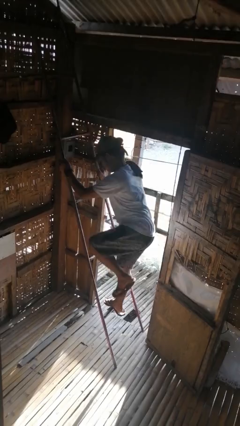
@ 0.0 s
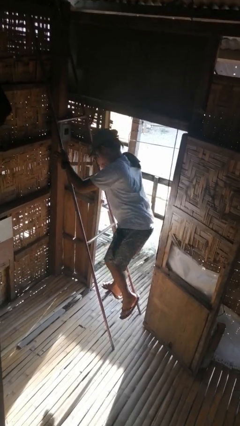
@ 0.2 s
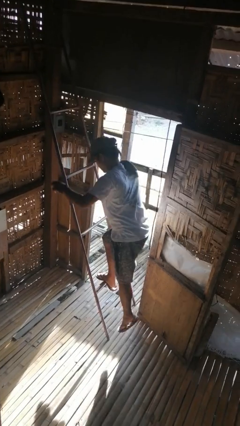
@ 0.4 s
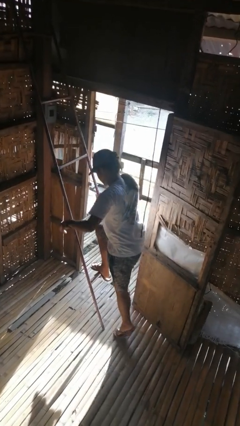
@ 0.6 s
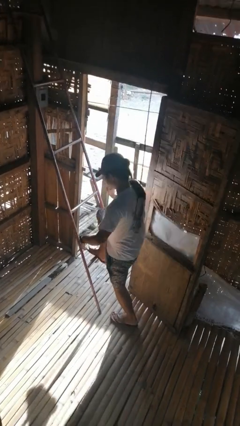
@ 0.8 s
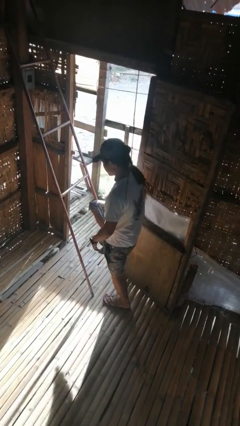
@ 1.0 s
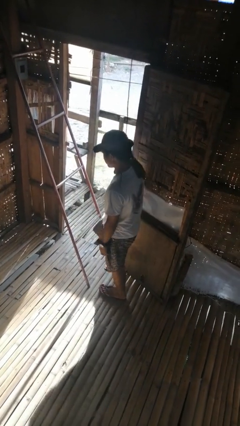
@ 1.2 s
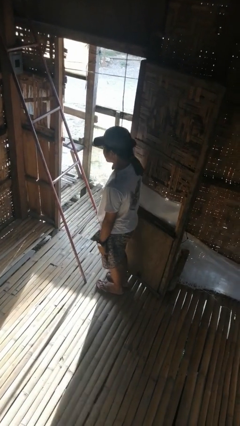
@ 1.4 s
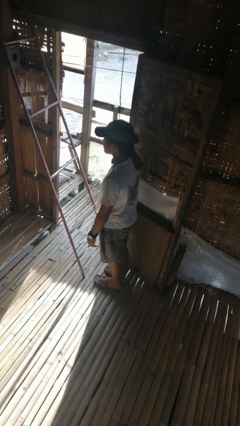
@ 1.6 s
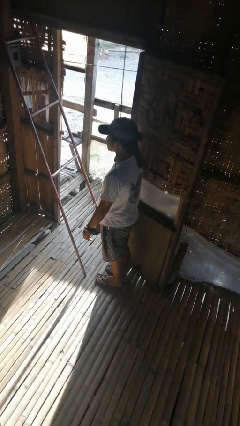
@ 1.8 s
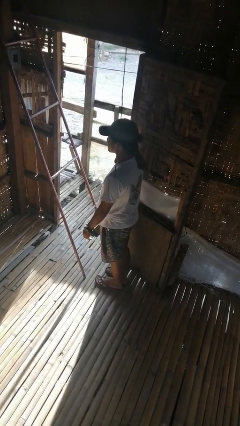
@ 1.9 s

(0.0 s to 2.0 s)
person climbs down ladder

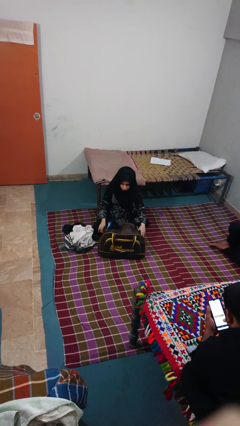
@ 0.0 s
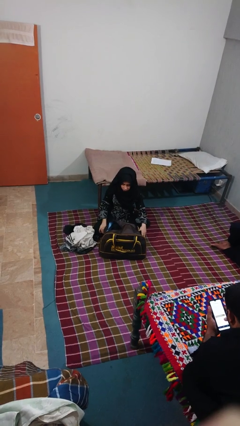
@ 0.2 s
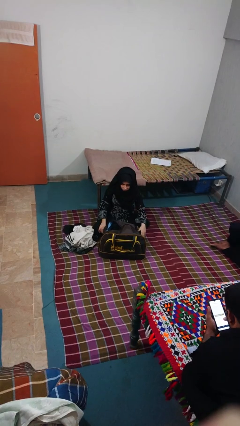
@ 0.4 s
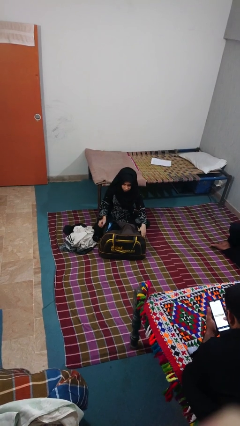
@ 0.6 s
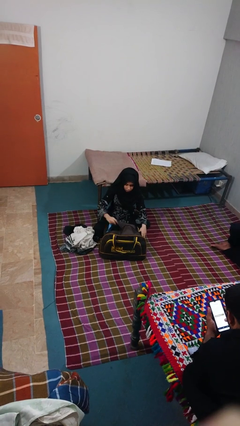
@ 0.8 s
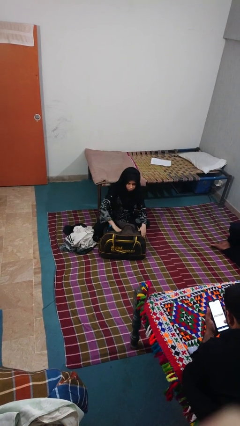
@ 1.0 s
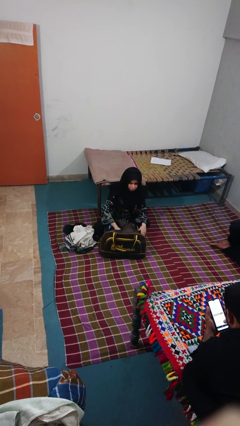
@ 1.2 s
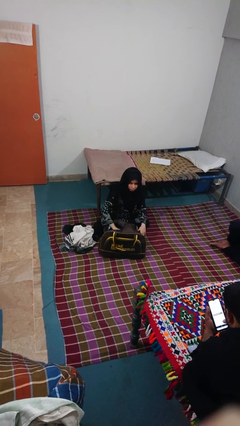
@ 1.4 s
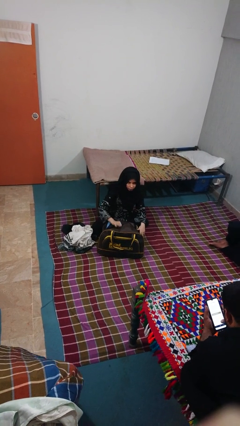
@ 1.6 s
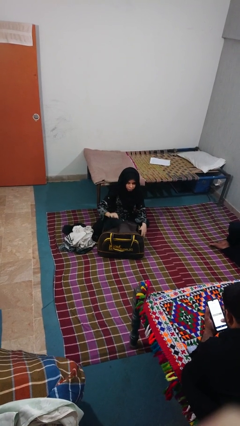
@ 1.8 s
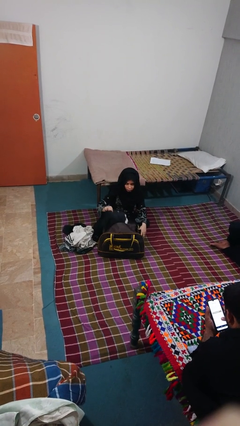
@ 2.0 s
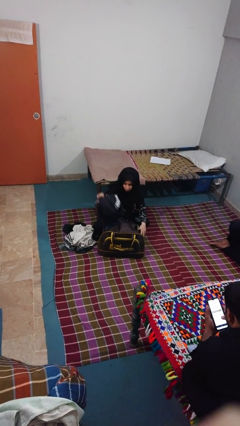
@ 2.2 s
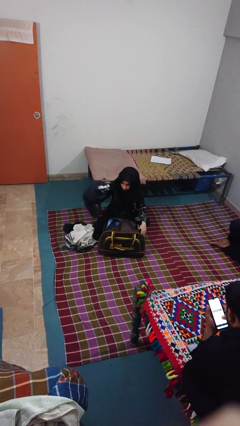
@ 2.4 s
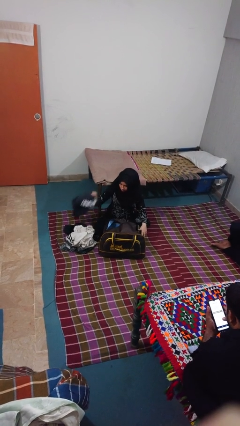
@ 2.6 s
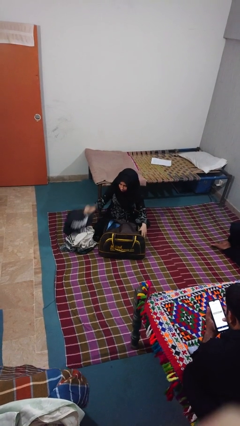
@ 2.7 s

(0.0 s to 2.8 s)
person unloads clothes from suitcase

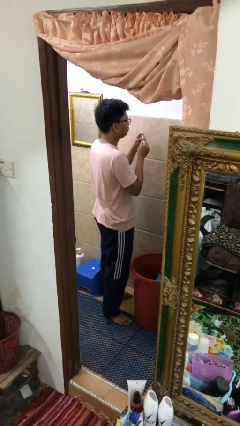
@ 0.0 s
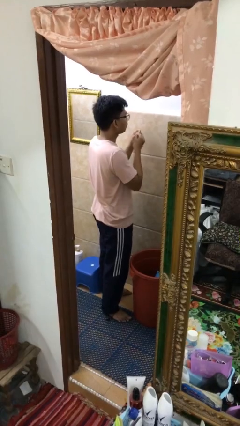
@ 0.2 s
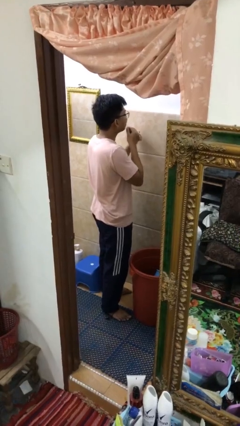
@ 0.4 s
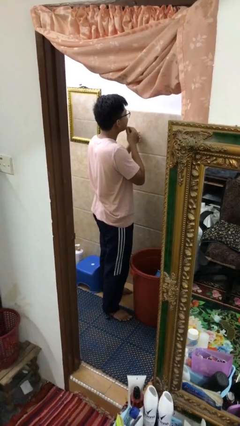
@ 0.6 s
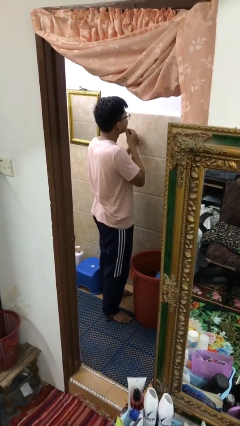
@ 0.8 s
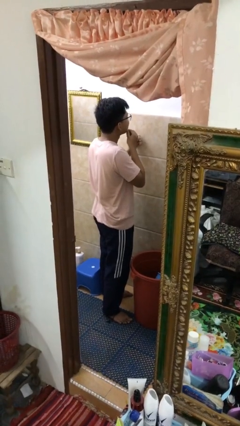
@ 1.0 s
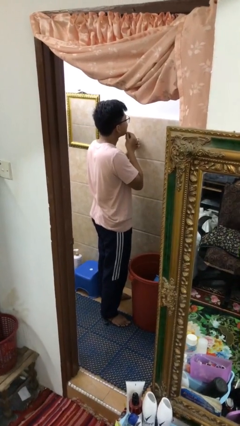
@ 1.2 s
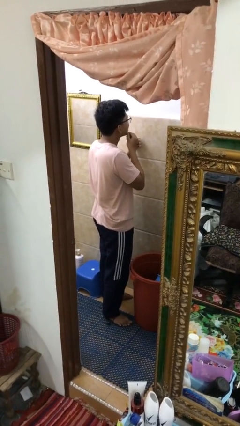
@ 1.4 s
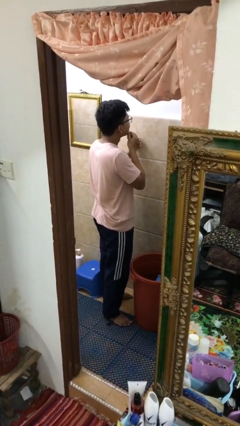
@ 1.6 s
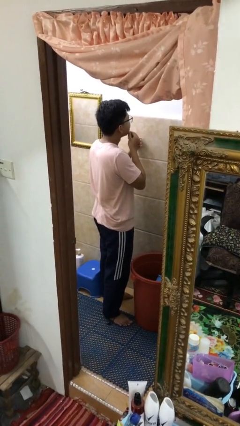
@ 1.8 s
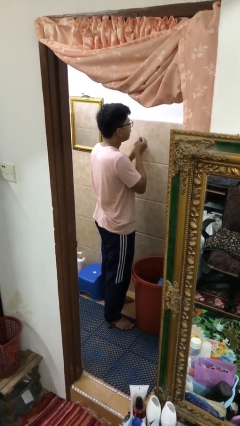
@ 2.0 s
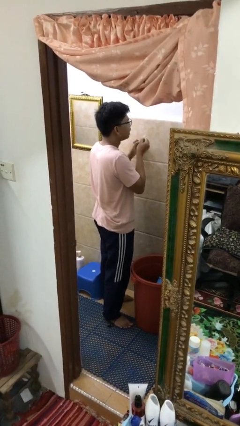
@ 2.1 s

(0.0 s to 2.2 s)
person flosses

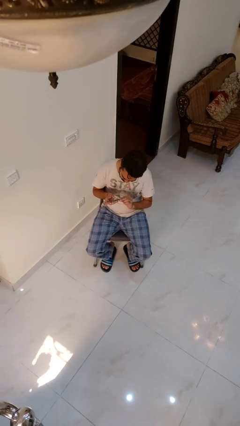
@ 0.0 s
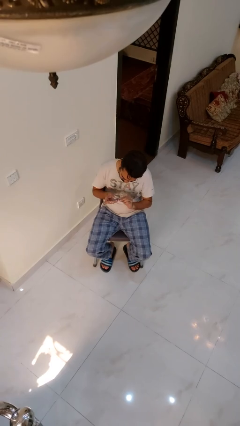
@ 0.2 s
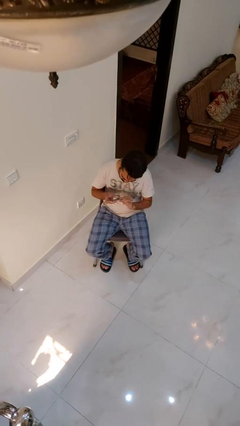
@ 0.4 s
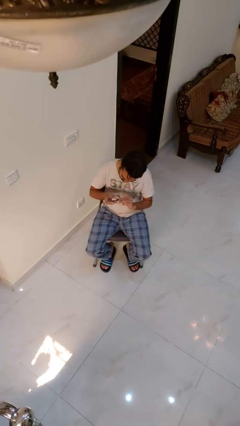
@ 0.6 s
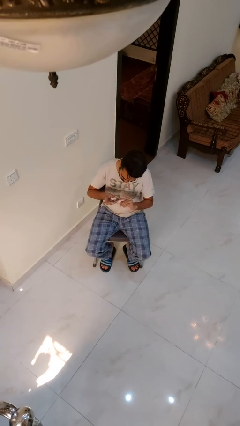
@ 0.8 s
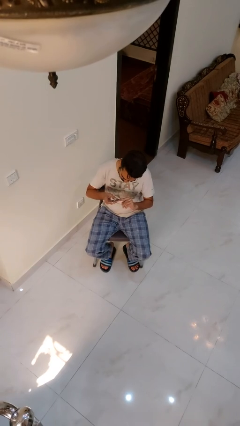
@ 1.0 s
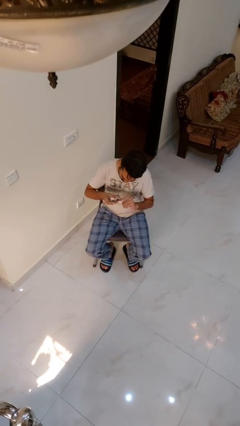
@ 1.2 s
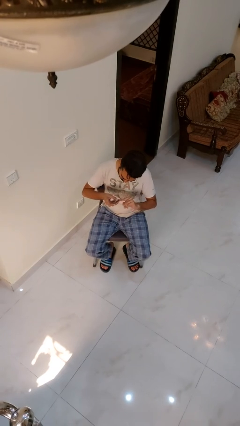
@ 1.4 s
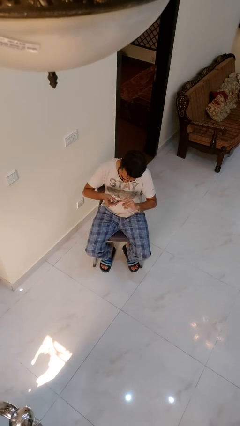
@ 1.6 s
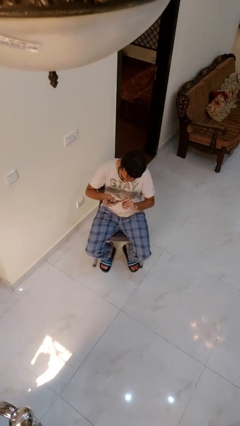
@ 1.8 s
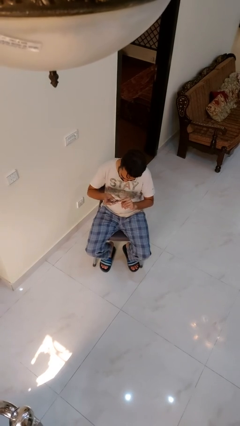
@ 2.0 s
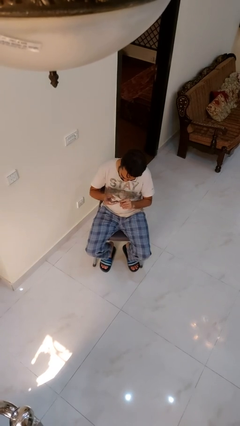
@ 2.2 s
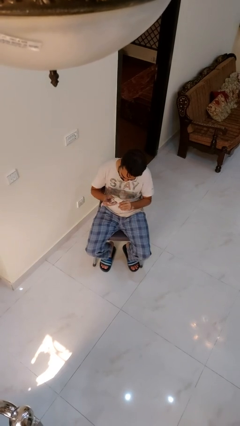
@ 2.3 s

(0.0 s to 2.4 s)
person clips fingernails

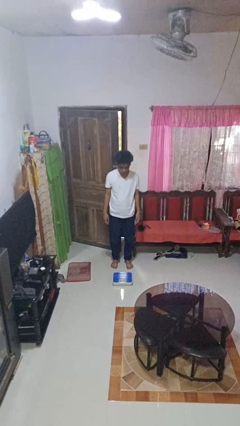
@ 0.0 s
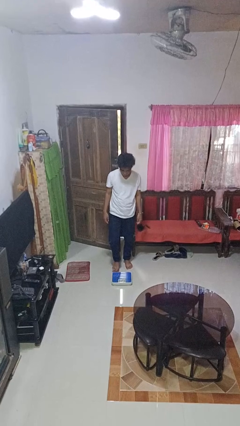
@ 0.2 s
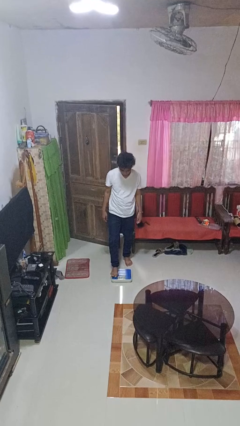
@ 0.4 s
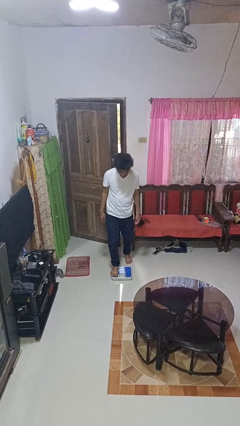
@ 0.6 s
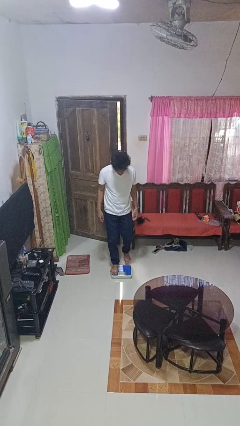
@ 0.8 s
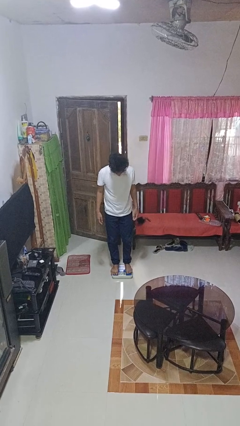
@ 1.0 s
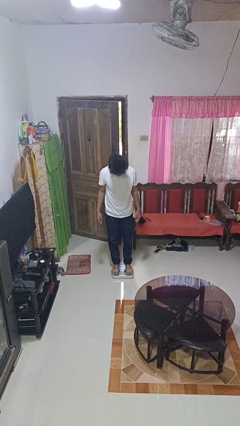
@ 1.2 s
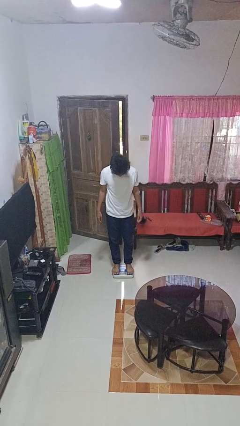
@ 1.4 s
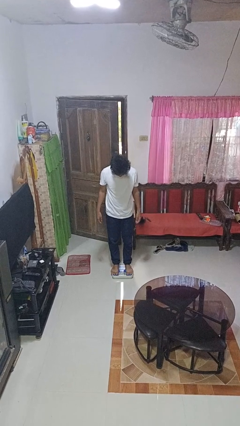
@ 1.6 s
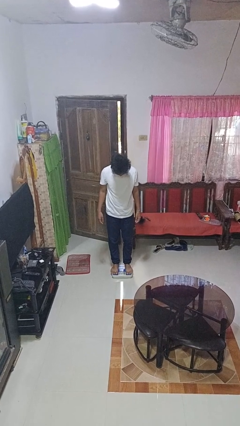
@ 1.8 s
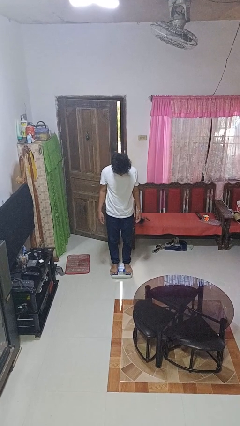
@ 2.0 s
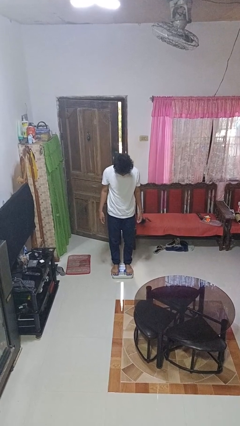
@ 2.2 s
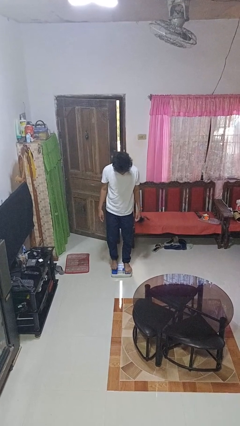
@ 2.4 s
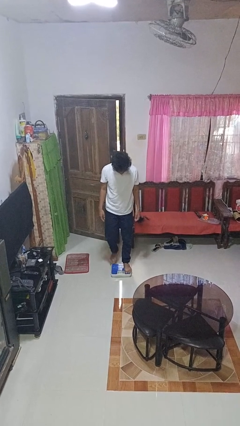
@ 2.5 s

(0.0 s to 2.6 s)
person uses bodyweight scale

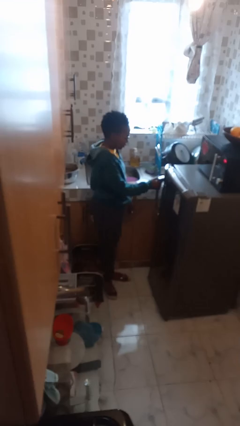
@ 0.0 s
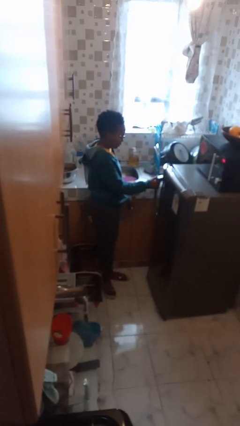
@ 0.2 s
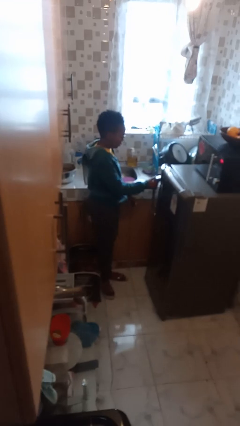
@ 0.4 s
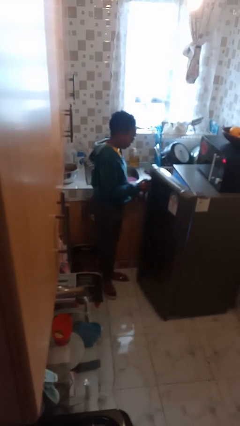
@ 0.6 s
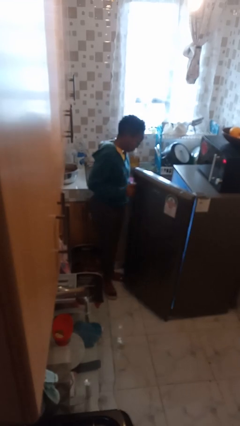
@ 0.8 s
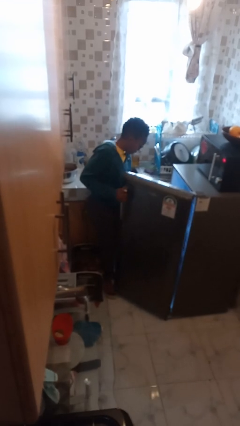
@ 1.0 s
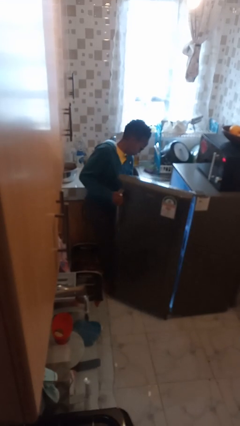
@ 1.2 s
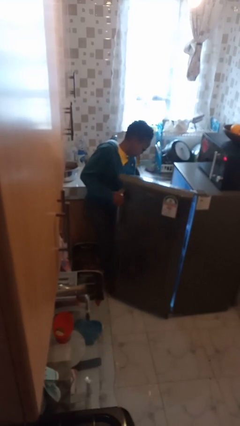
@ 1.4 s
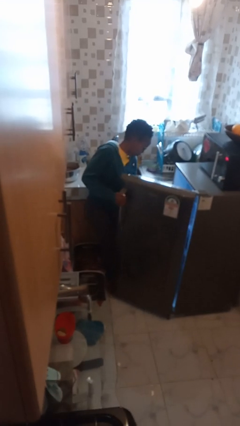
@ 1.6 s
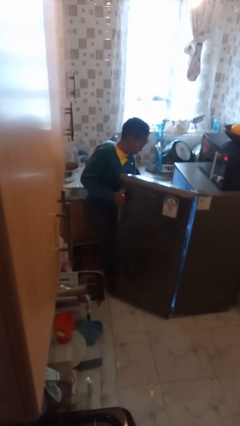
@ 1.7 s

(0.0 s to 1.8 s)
person takes object from refrigerator

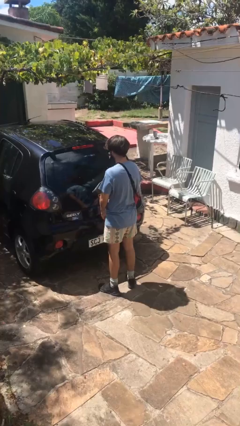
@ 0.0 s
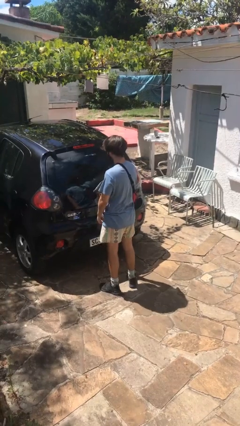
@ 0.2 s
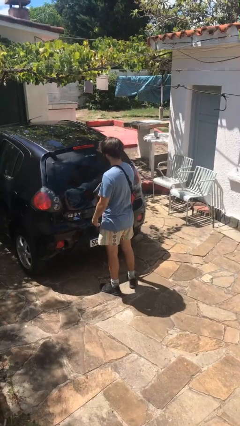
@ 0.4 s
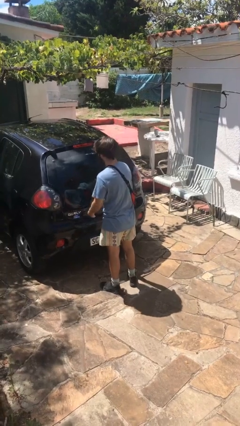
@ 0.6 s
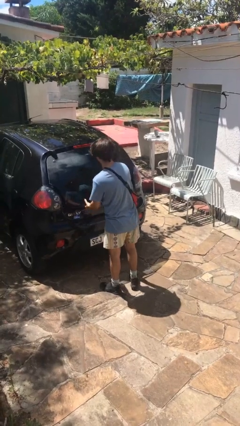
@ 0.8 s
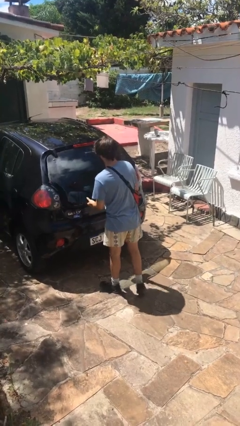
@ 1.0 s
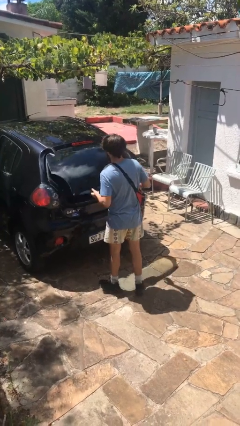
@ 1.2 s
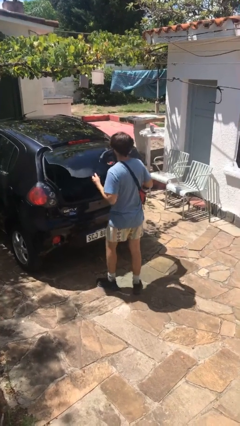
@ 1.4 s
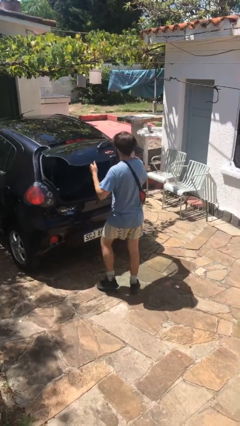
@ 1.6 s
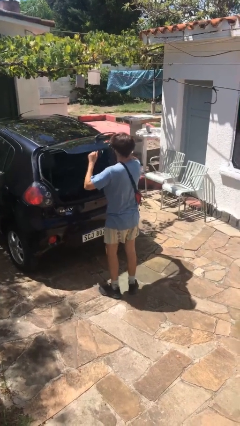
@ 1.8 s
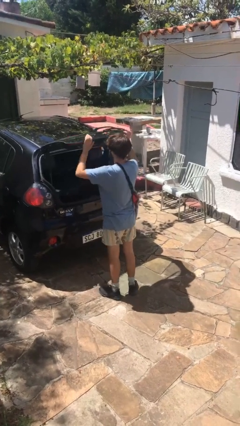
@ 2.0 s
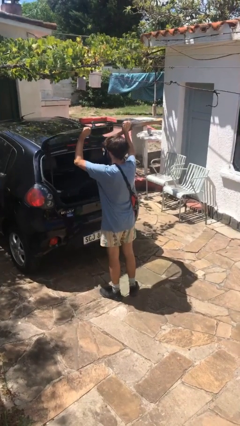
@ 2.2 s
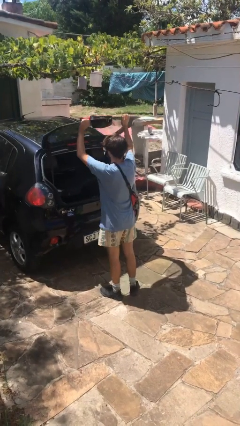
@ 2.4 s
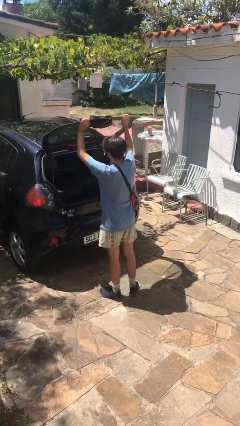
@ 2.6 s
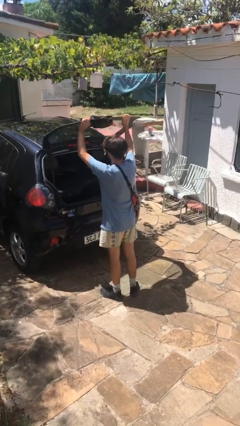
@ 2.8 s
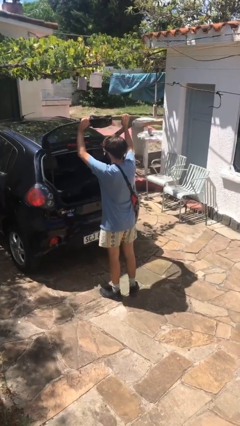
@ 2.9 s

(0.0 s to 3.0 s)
person opens car trunk

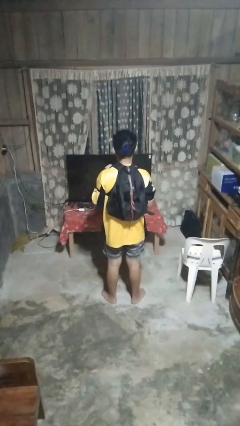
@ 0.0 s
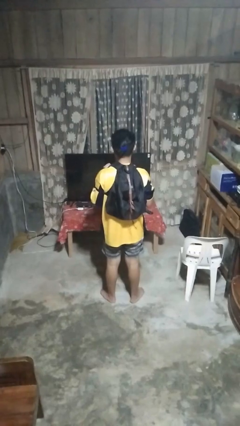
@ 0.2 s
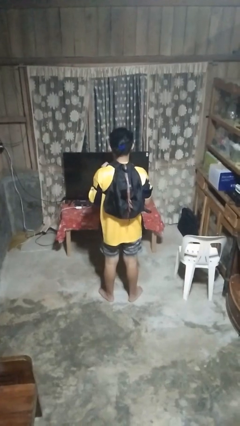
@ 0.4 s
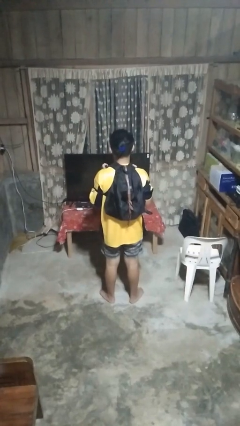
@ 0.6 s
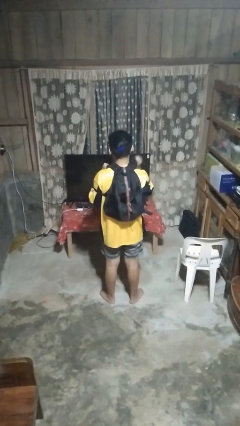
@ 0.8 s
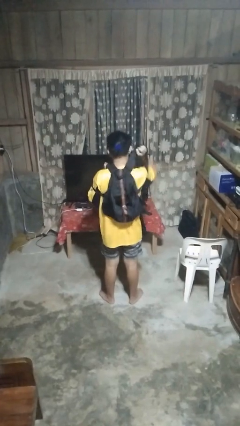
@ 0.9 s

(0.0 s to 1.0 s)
person takes off backpack
